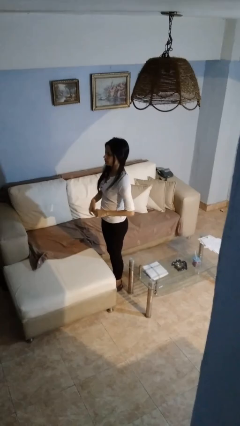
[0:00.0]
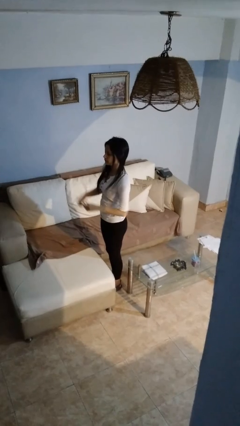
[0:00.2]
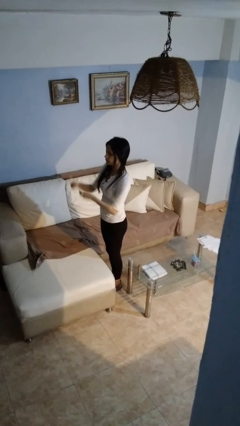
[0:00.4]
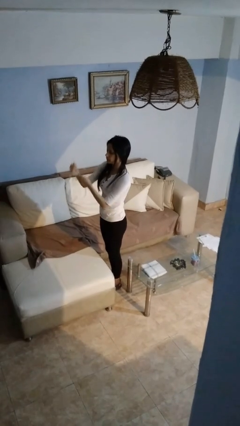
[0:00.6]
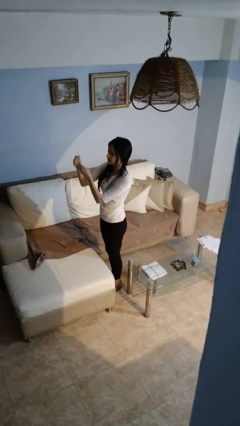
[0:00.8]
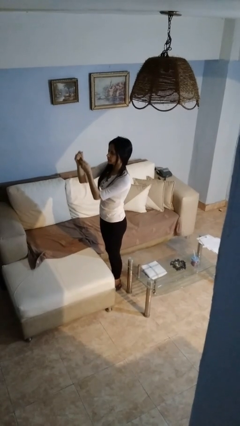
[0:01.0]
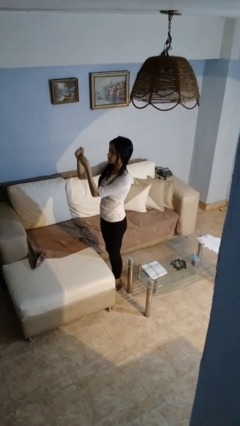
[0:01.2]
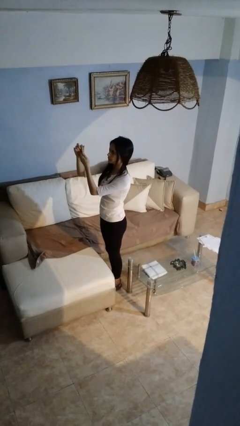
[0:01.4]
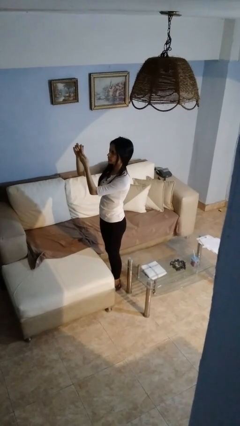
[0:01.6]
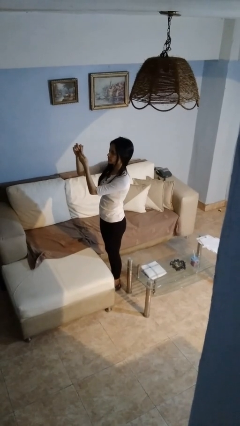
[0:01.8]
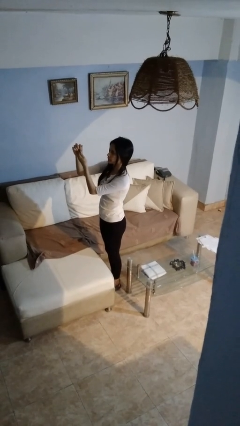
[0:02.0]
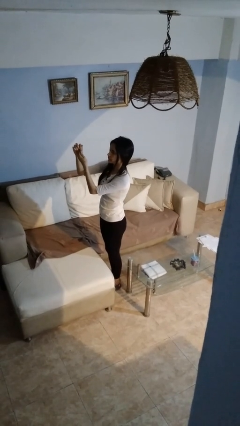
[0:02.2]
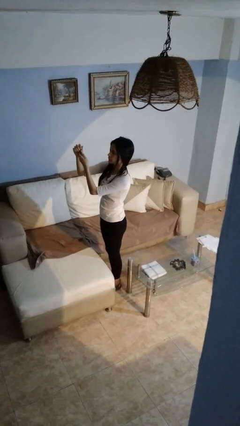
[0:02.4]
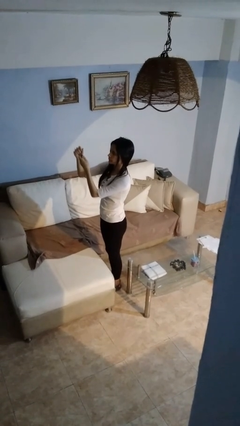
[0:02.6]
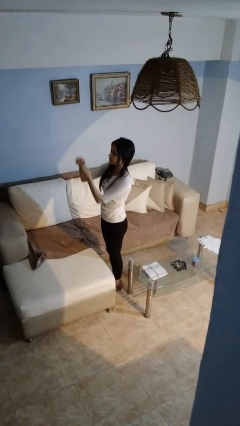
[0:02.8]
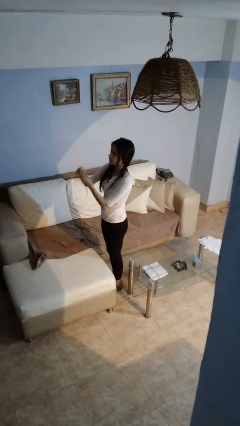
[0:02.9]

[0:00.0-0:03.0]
person clips fingernails

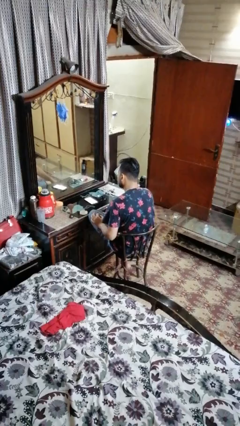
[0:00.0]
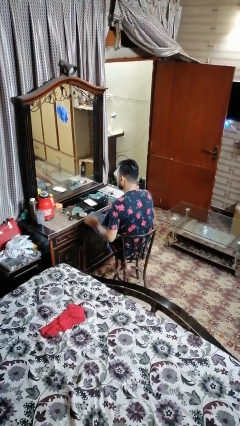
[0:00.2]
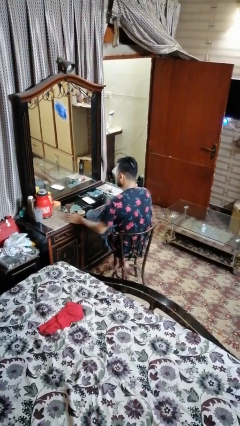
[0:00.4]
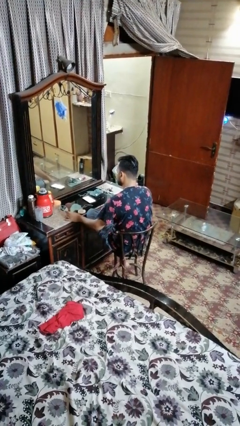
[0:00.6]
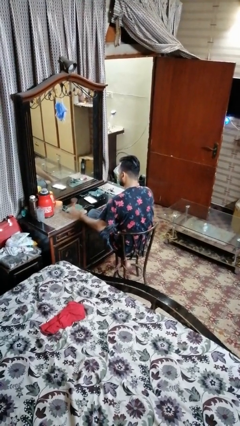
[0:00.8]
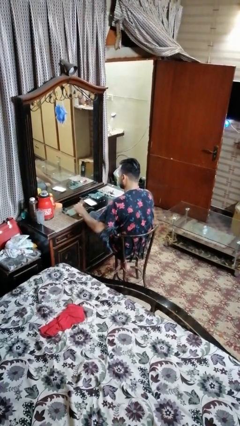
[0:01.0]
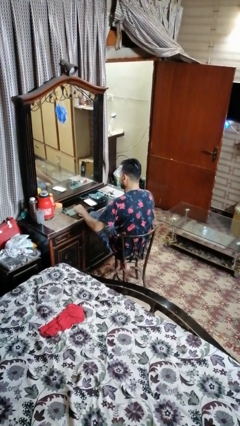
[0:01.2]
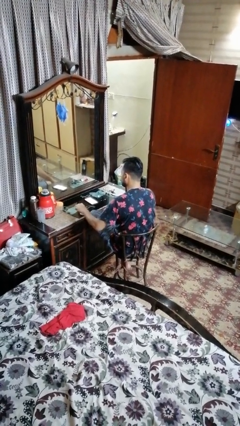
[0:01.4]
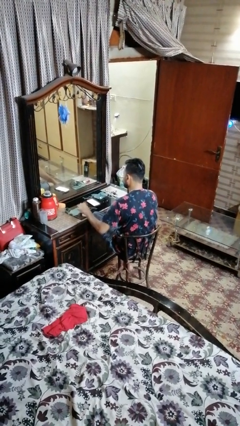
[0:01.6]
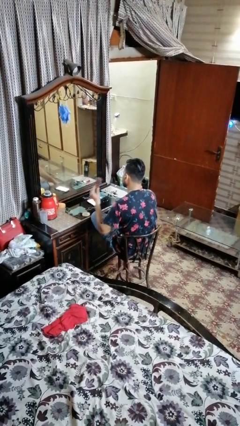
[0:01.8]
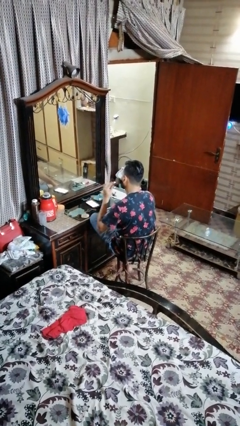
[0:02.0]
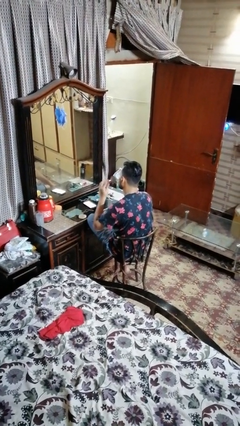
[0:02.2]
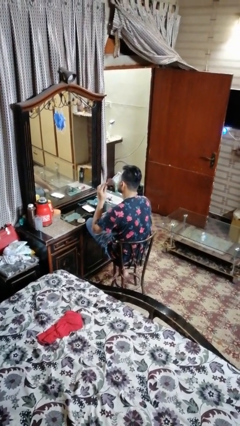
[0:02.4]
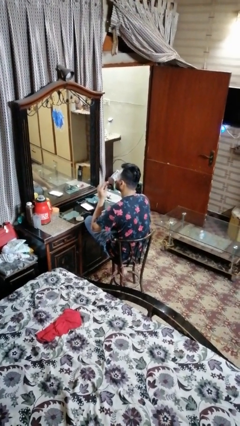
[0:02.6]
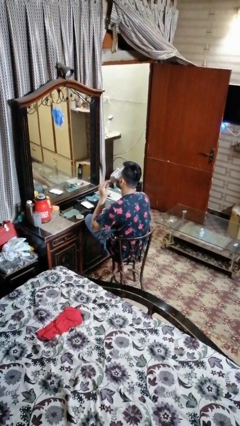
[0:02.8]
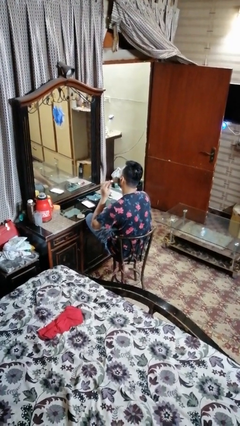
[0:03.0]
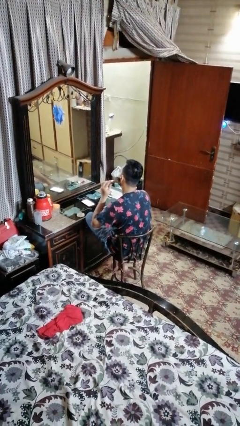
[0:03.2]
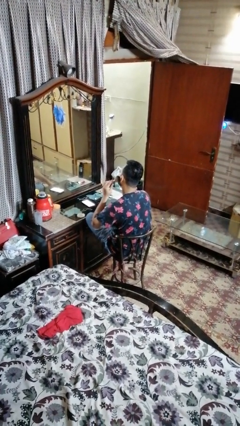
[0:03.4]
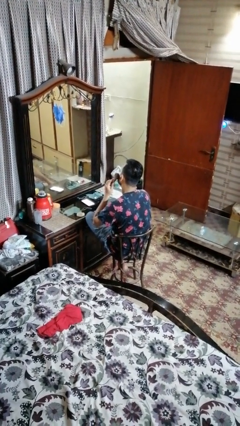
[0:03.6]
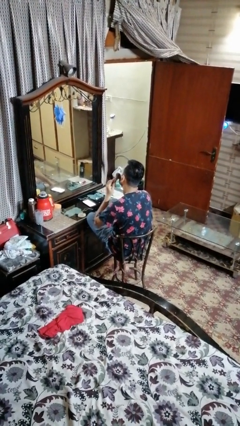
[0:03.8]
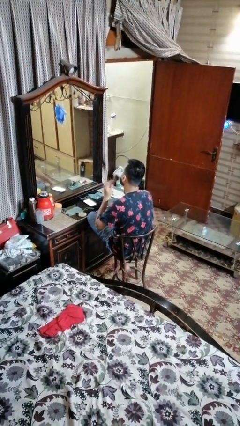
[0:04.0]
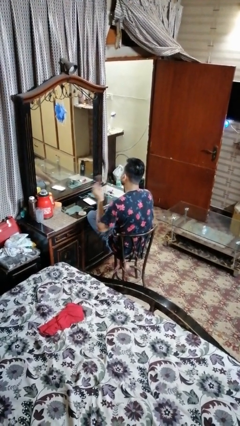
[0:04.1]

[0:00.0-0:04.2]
person applies foundation makeup

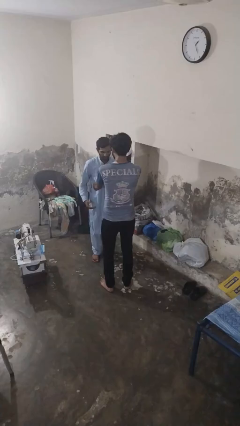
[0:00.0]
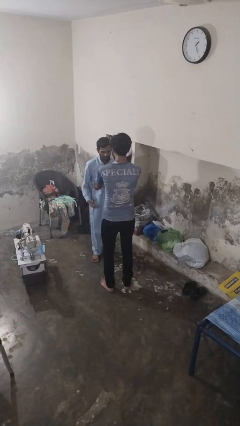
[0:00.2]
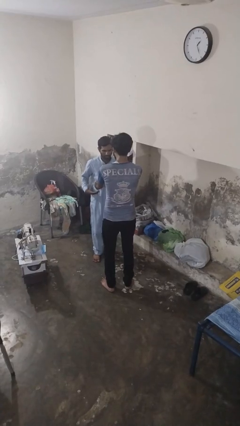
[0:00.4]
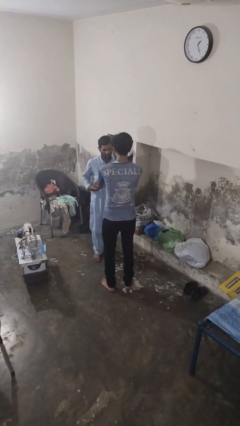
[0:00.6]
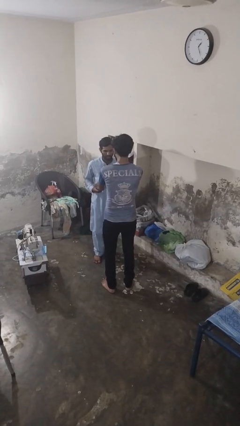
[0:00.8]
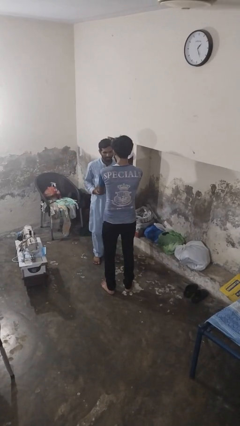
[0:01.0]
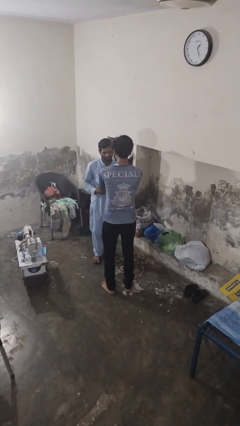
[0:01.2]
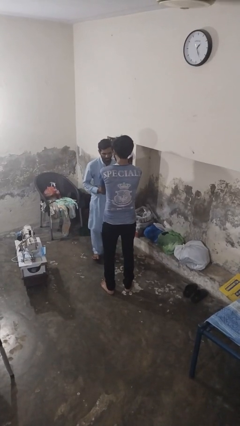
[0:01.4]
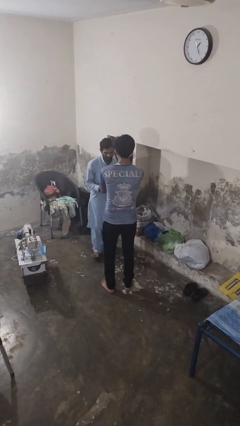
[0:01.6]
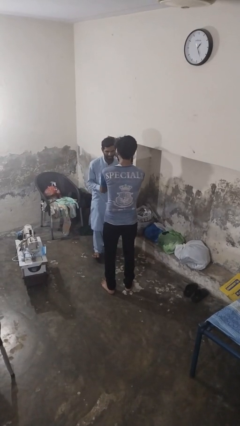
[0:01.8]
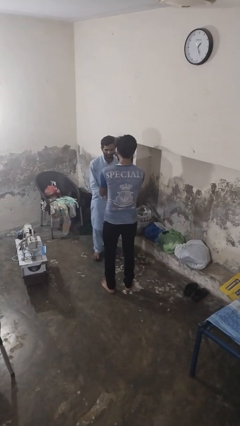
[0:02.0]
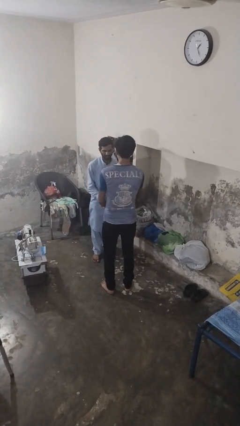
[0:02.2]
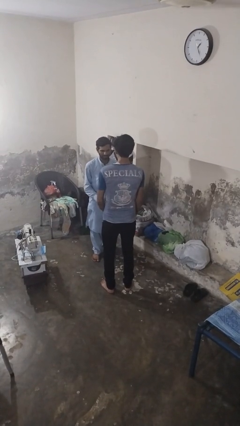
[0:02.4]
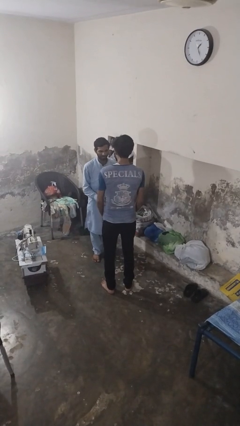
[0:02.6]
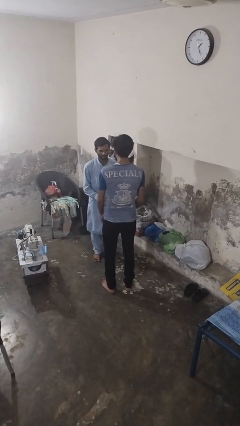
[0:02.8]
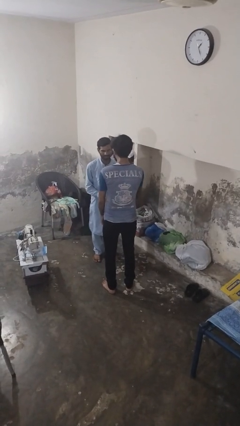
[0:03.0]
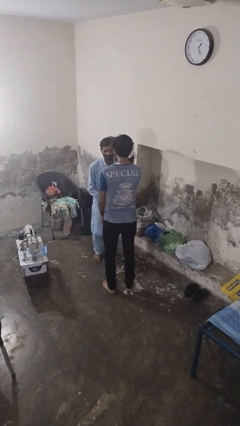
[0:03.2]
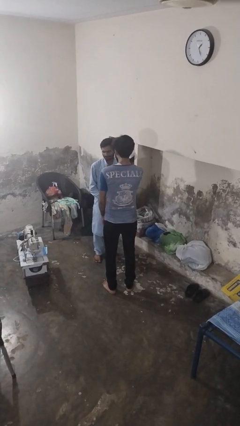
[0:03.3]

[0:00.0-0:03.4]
person tickles person

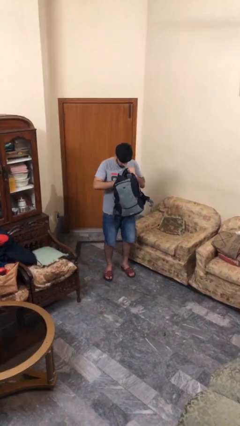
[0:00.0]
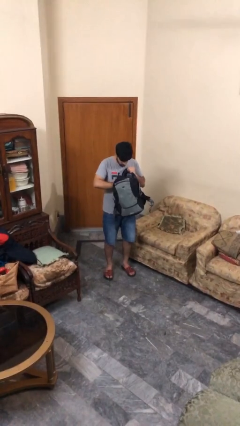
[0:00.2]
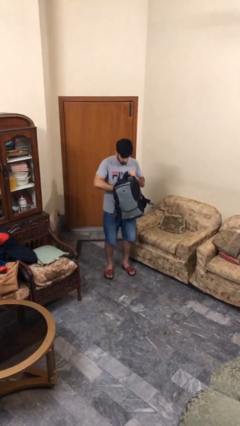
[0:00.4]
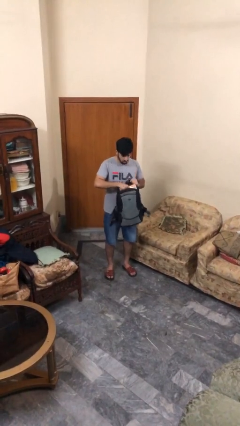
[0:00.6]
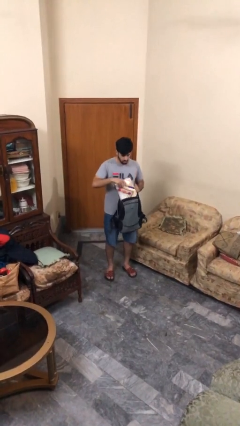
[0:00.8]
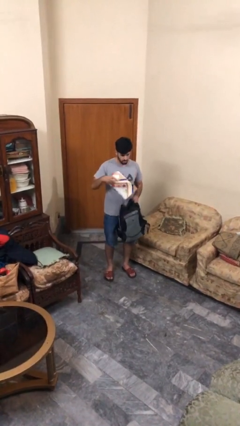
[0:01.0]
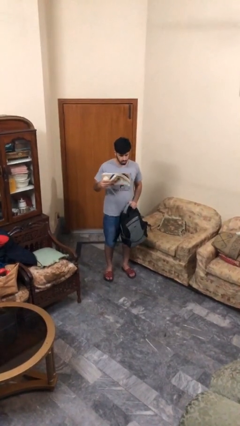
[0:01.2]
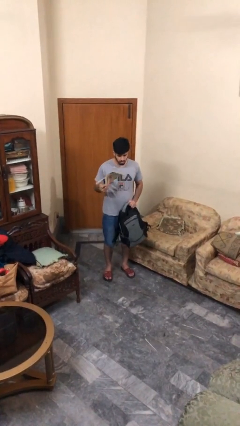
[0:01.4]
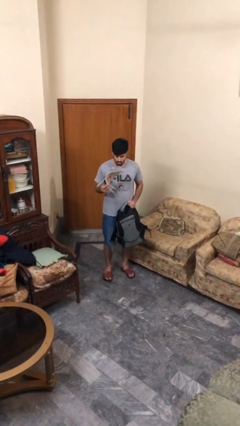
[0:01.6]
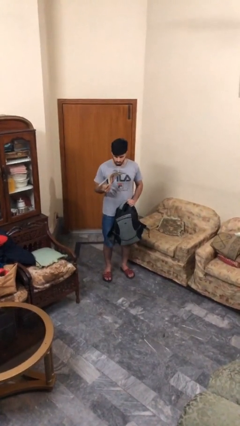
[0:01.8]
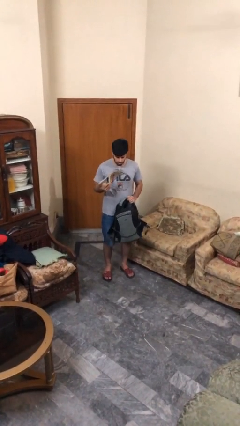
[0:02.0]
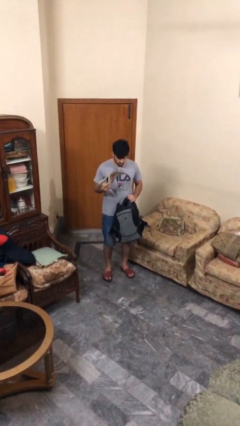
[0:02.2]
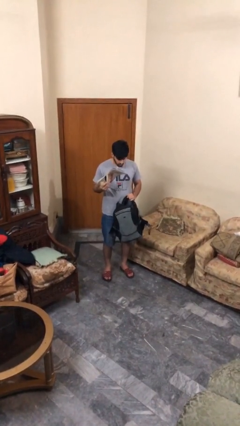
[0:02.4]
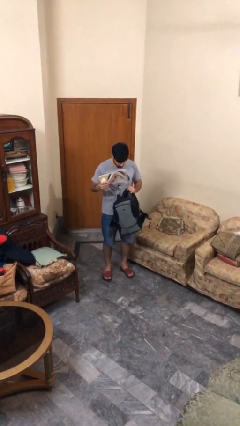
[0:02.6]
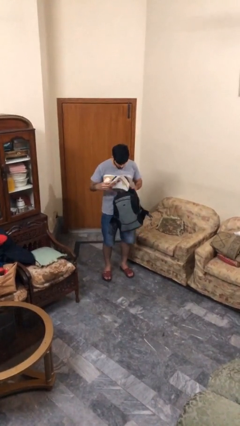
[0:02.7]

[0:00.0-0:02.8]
person takes object from backpack

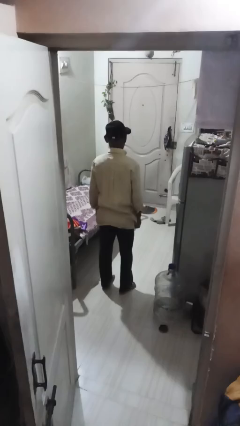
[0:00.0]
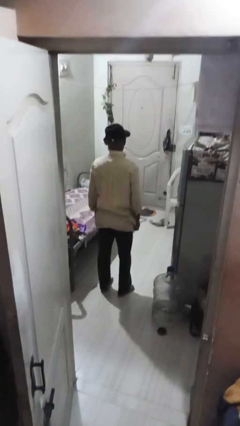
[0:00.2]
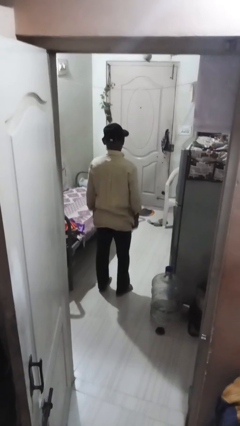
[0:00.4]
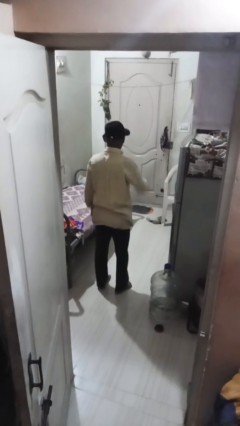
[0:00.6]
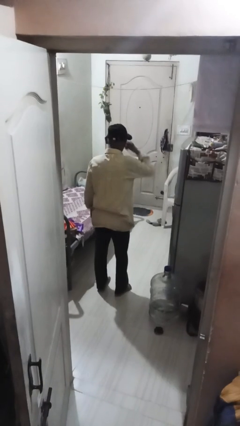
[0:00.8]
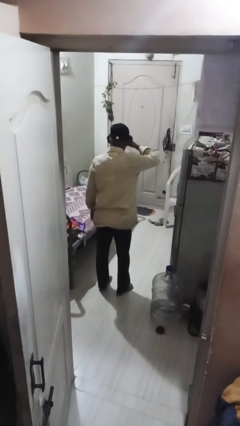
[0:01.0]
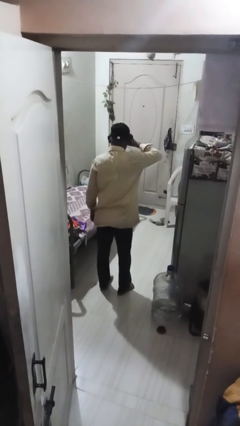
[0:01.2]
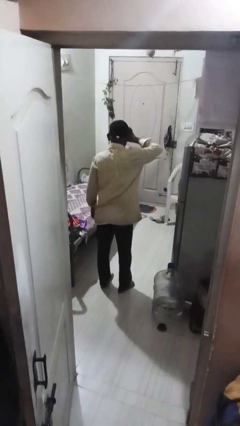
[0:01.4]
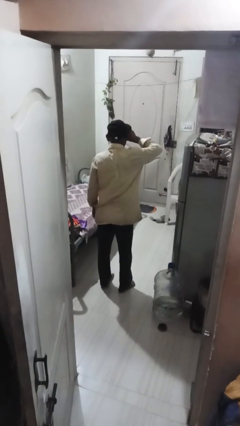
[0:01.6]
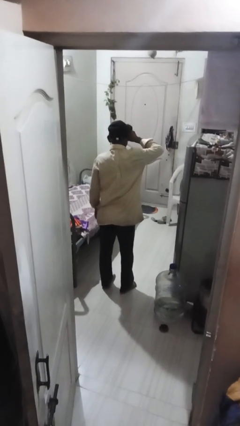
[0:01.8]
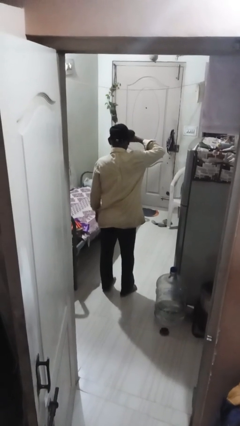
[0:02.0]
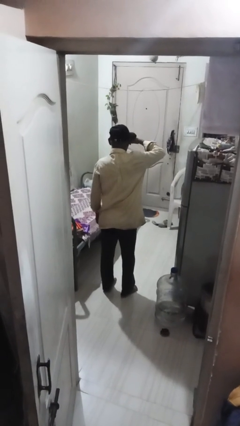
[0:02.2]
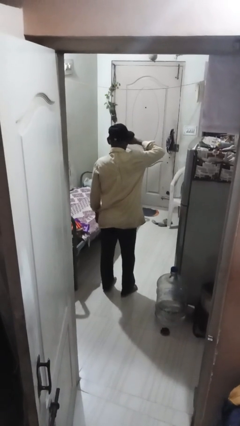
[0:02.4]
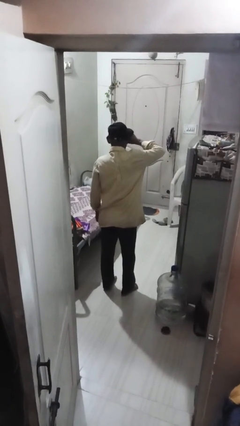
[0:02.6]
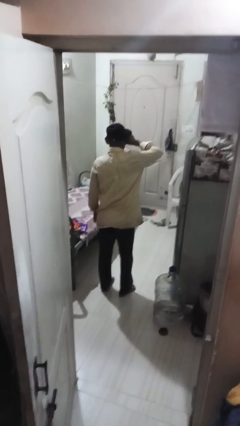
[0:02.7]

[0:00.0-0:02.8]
person rubs eyes

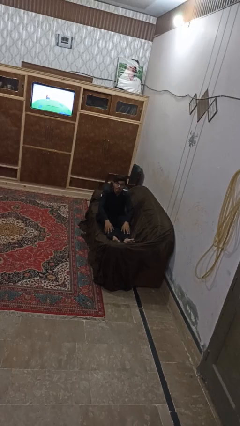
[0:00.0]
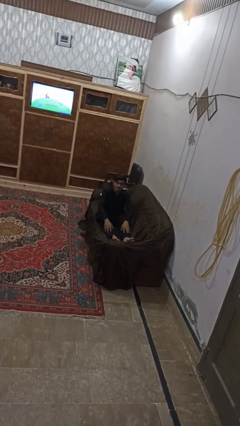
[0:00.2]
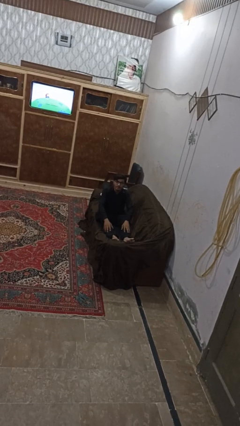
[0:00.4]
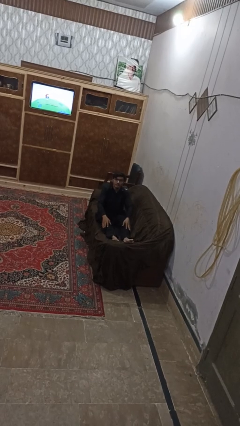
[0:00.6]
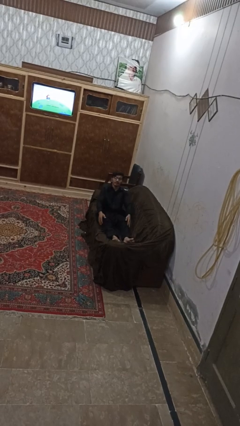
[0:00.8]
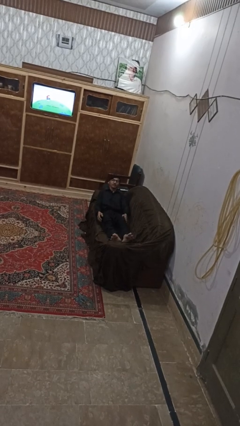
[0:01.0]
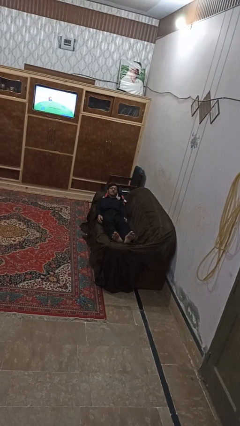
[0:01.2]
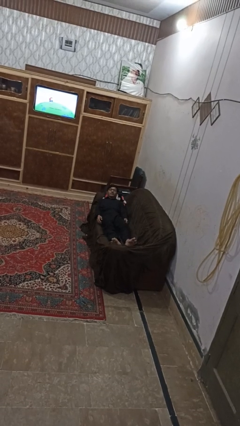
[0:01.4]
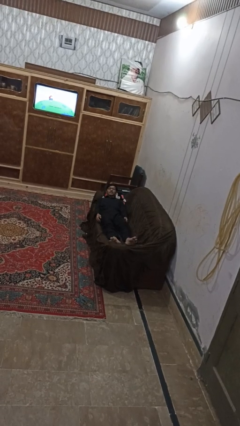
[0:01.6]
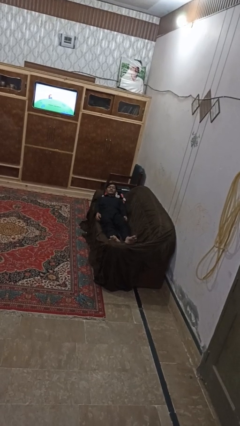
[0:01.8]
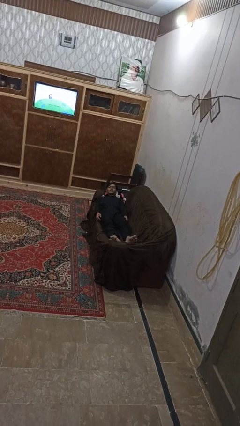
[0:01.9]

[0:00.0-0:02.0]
person lies down on couch
